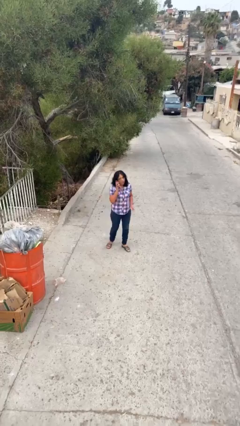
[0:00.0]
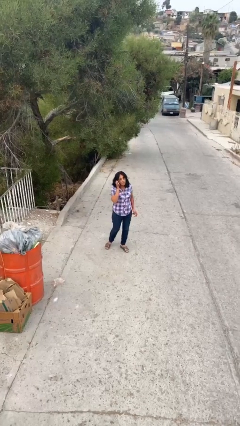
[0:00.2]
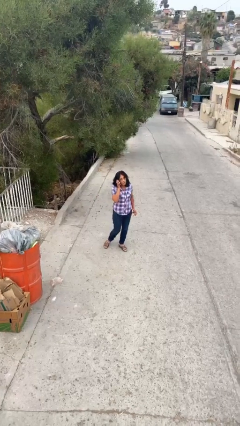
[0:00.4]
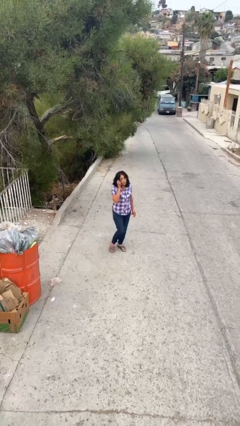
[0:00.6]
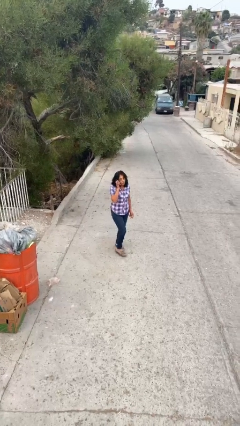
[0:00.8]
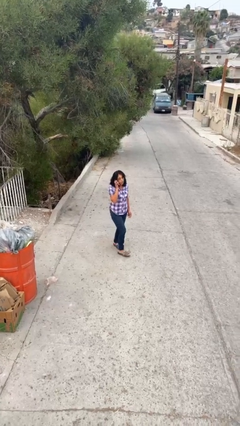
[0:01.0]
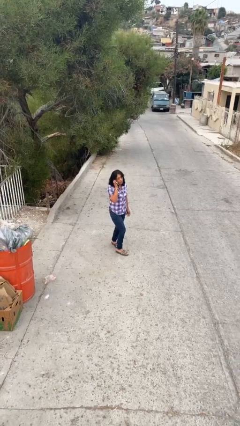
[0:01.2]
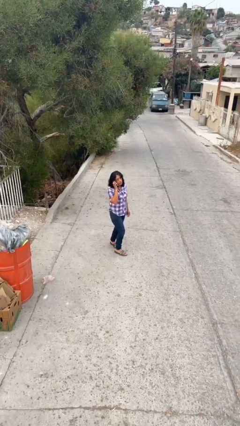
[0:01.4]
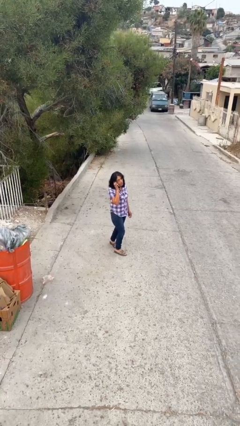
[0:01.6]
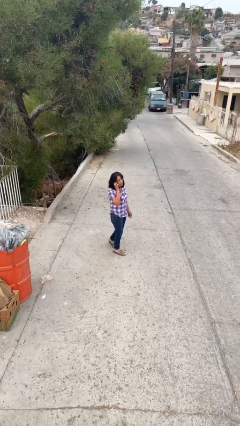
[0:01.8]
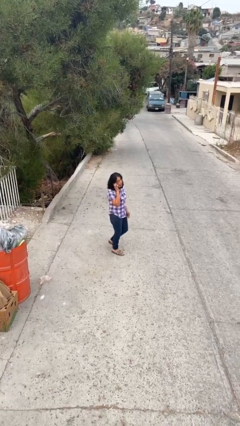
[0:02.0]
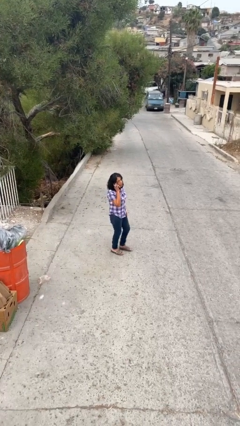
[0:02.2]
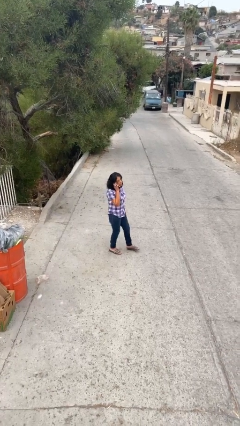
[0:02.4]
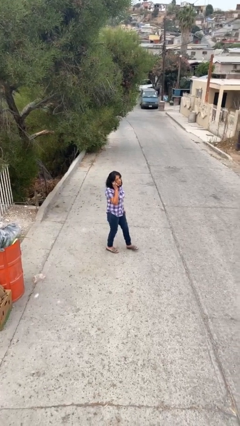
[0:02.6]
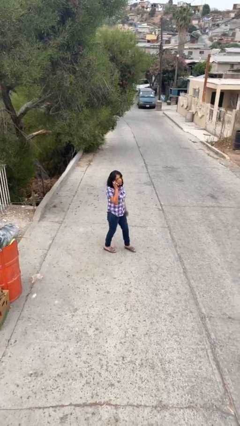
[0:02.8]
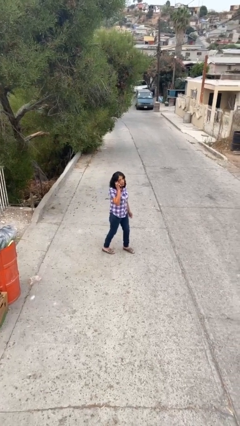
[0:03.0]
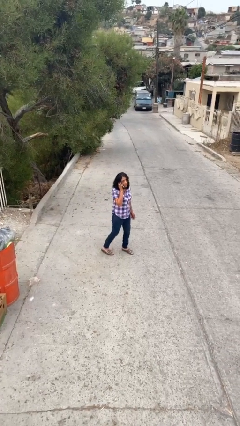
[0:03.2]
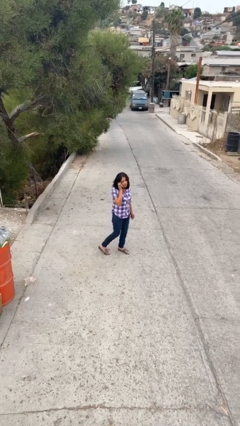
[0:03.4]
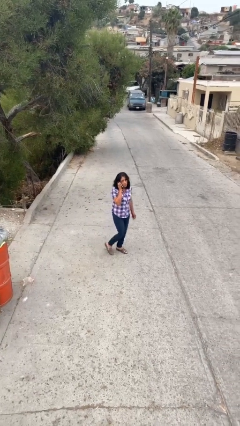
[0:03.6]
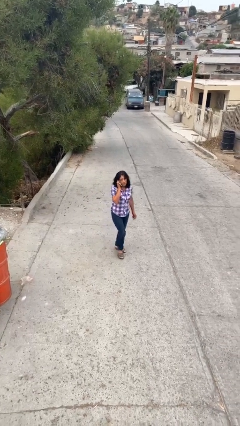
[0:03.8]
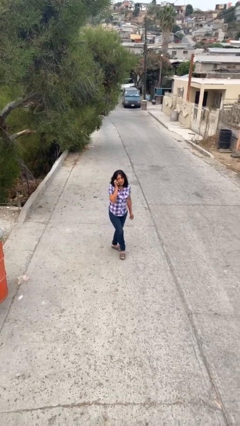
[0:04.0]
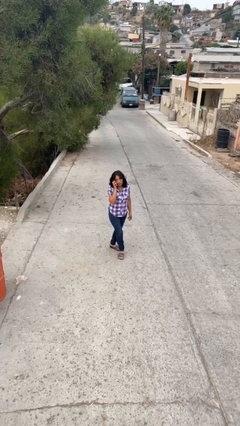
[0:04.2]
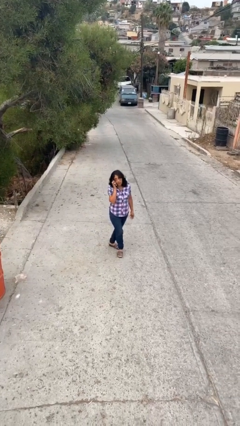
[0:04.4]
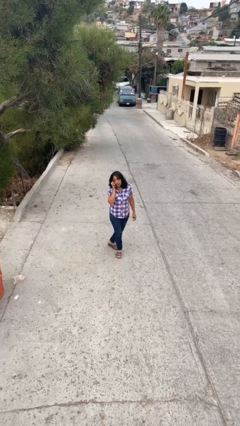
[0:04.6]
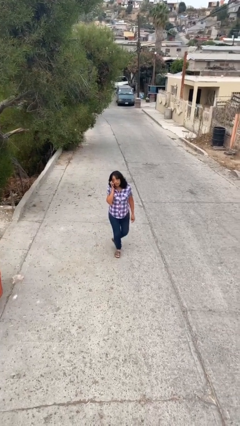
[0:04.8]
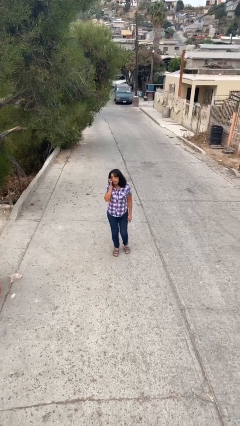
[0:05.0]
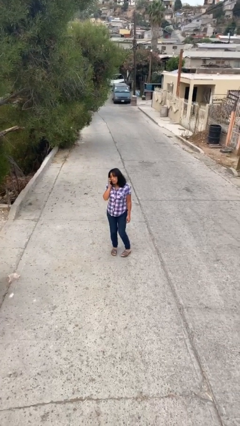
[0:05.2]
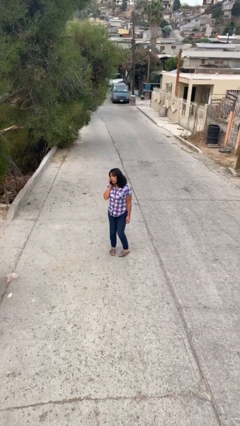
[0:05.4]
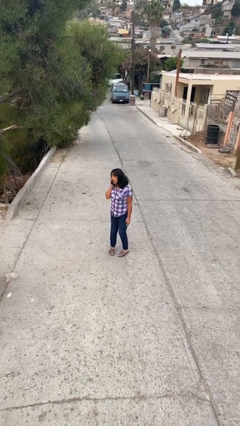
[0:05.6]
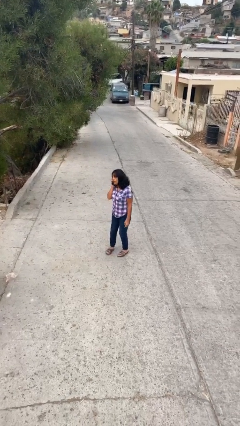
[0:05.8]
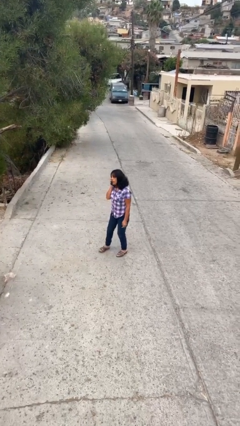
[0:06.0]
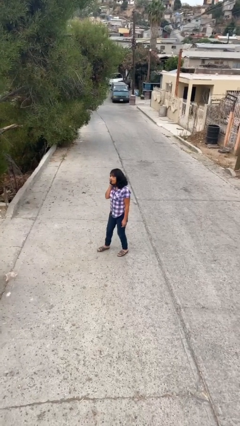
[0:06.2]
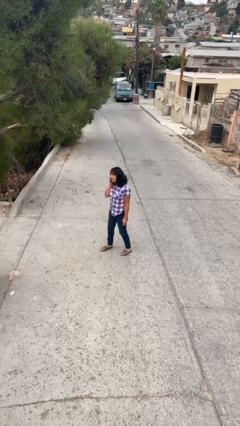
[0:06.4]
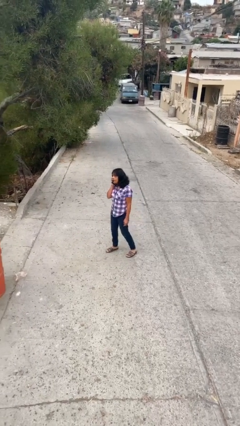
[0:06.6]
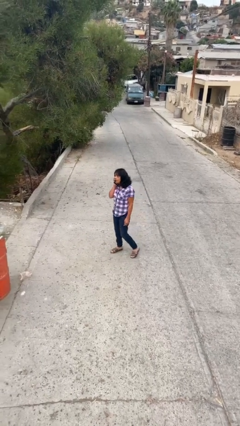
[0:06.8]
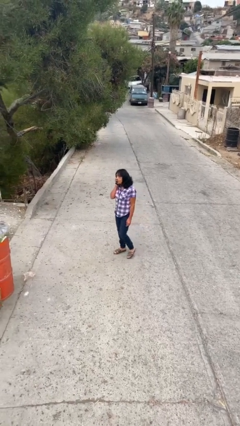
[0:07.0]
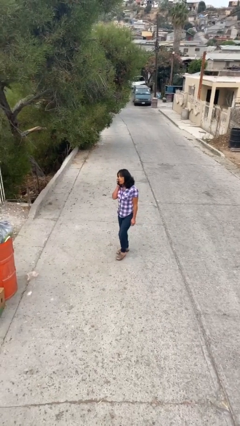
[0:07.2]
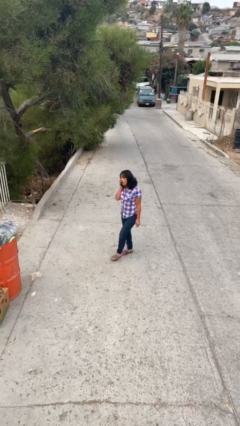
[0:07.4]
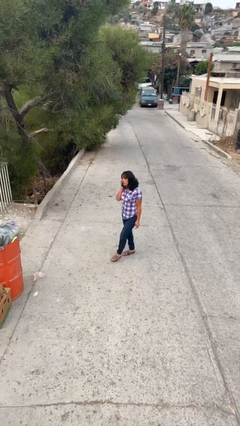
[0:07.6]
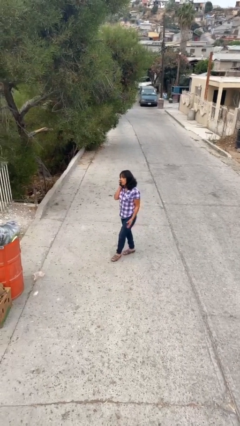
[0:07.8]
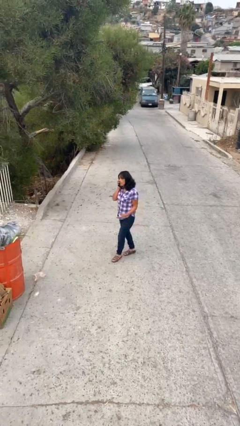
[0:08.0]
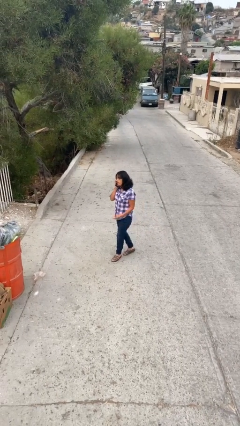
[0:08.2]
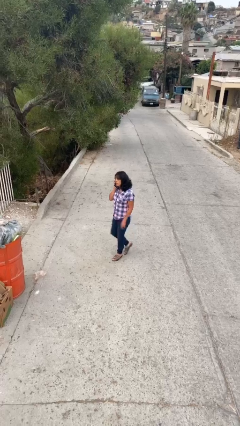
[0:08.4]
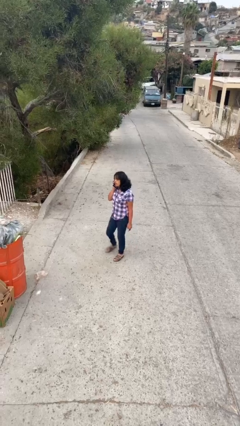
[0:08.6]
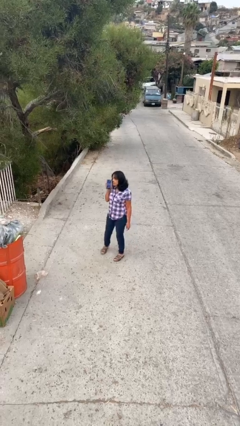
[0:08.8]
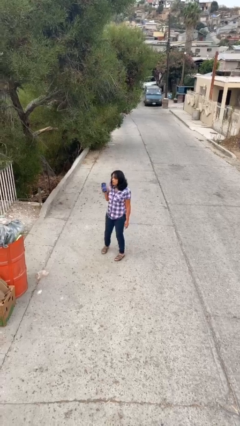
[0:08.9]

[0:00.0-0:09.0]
person talks on phone

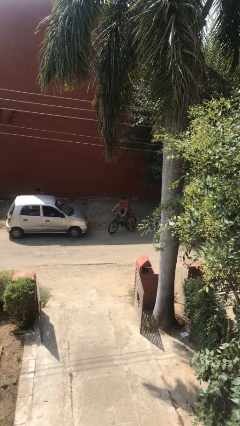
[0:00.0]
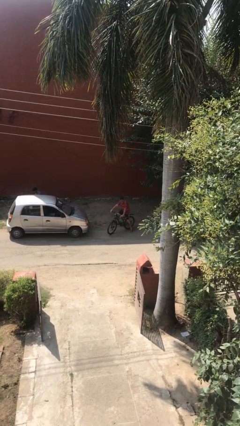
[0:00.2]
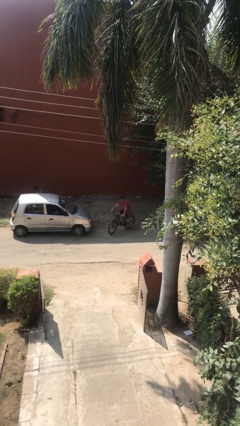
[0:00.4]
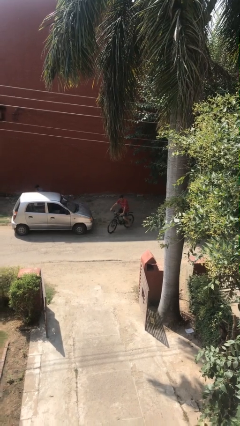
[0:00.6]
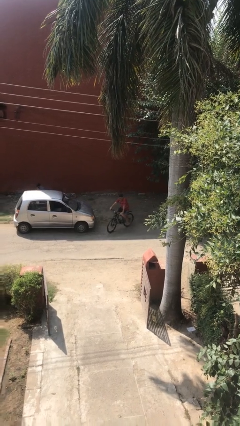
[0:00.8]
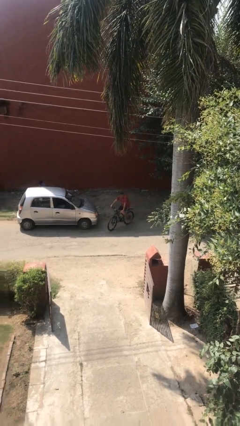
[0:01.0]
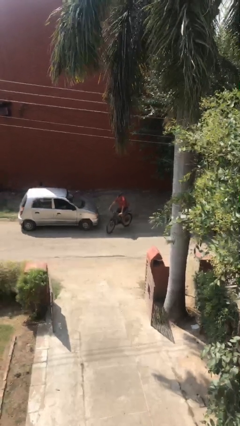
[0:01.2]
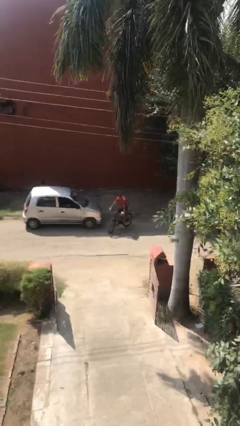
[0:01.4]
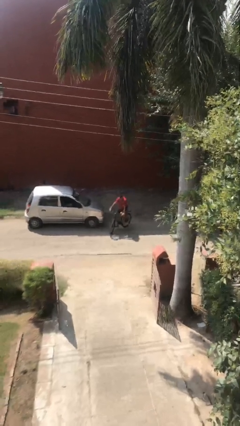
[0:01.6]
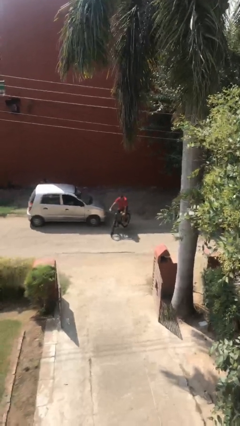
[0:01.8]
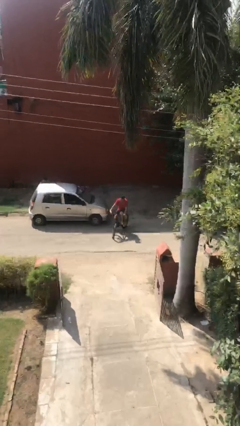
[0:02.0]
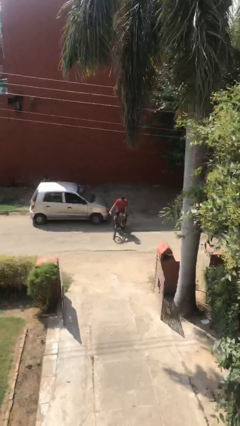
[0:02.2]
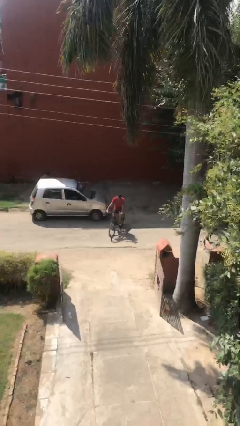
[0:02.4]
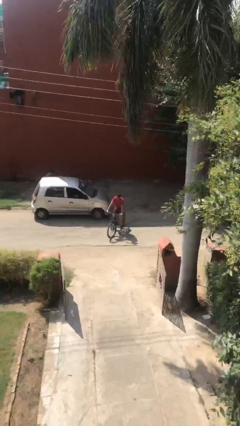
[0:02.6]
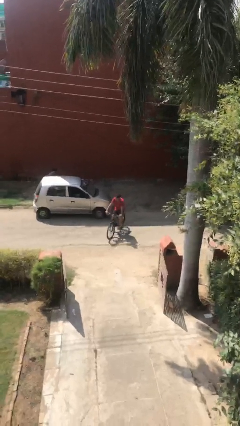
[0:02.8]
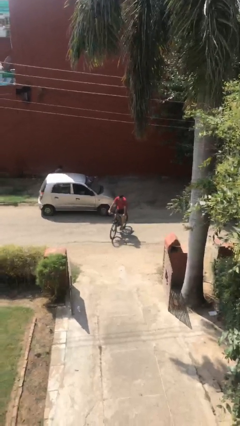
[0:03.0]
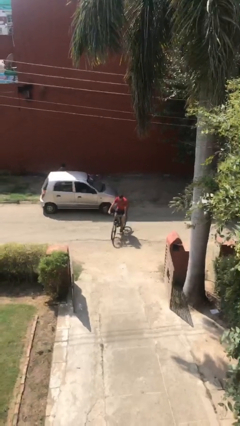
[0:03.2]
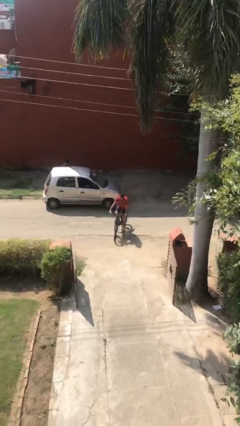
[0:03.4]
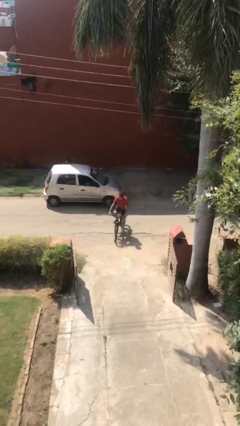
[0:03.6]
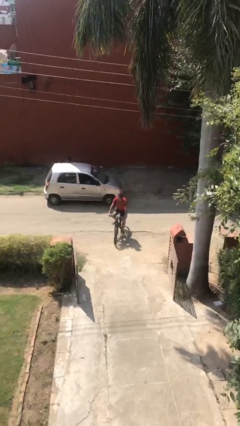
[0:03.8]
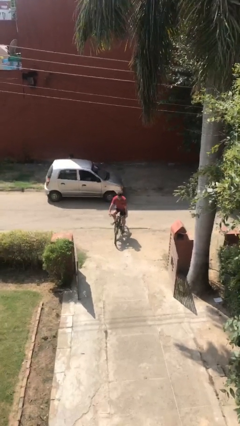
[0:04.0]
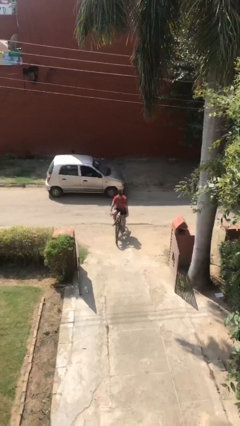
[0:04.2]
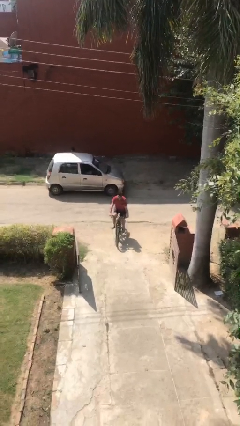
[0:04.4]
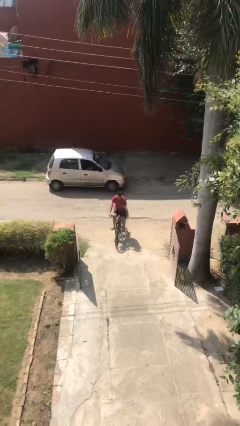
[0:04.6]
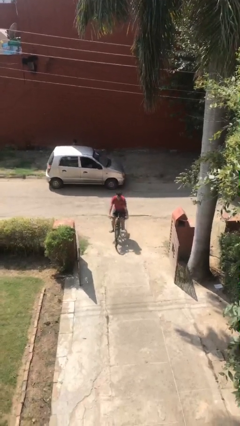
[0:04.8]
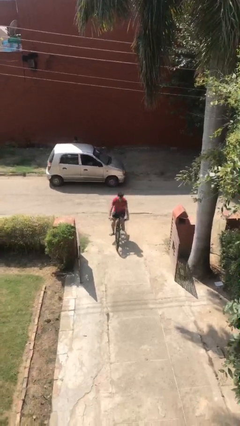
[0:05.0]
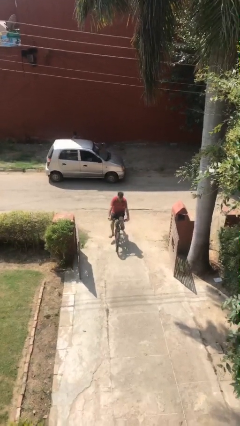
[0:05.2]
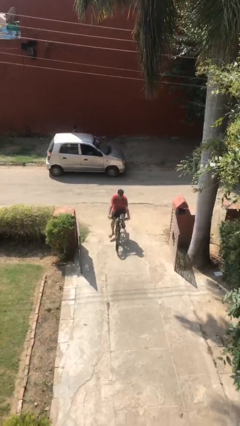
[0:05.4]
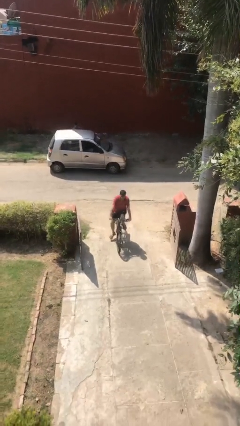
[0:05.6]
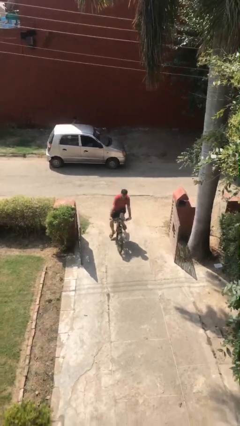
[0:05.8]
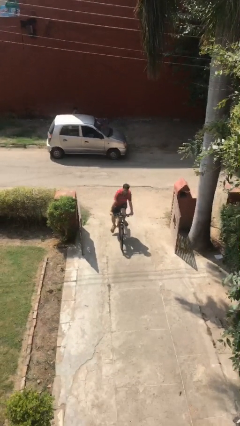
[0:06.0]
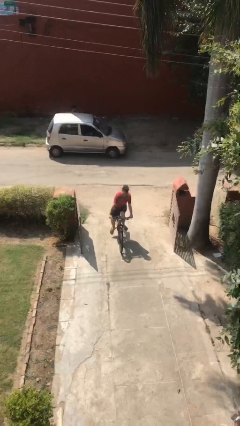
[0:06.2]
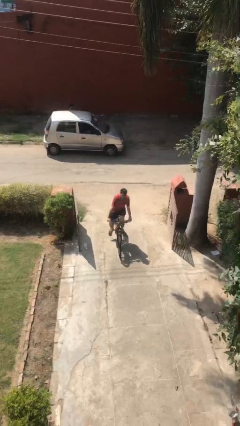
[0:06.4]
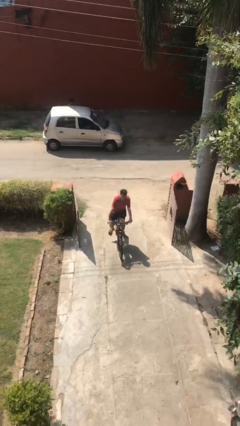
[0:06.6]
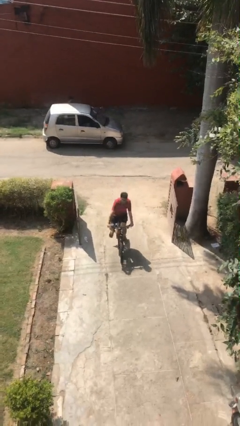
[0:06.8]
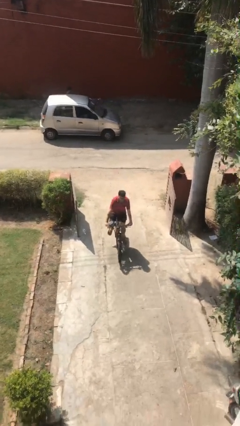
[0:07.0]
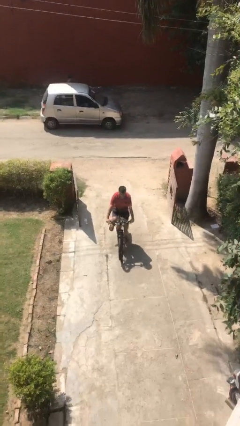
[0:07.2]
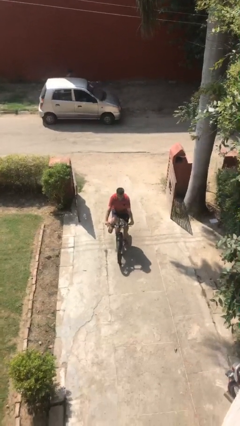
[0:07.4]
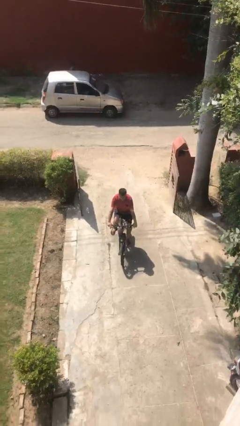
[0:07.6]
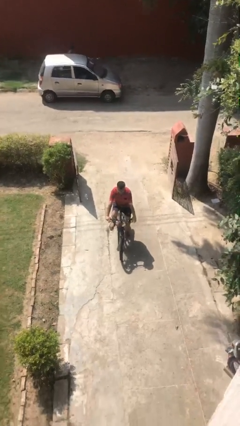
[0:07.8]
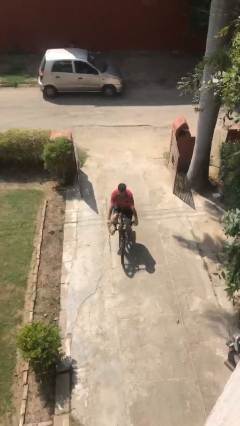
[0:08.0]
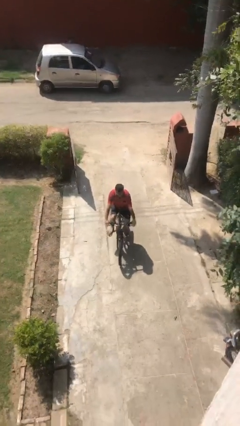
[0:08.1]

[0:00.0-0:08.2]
person rides bicycle

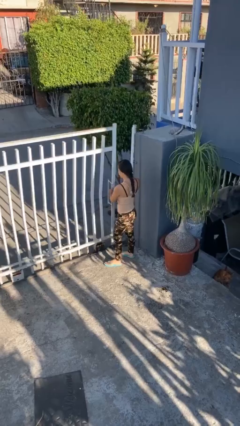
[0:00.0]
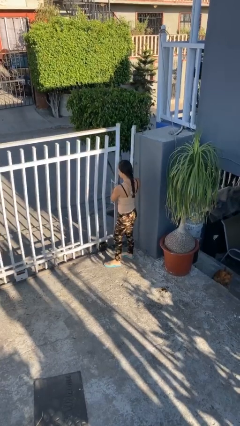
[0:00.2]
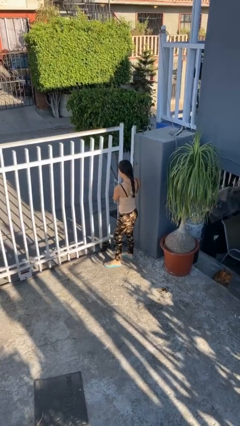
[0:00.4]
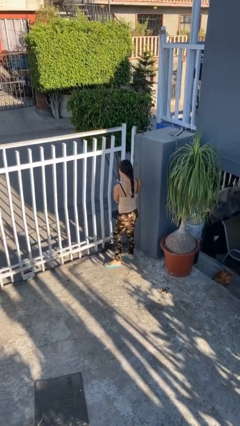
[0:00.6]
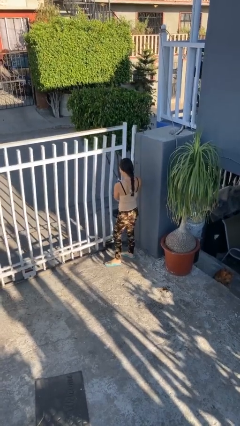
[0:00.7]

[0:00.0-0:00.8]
person closes facility door
